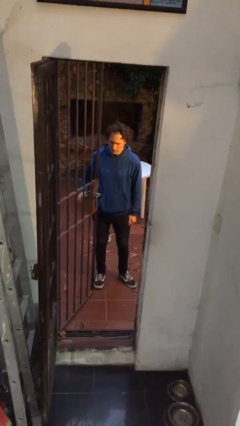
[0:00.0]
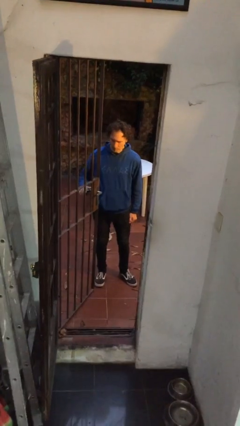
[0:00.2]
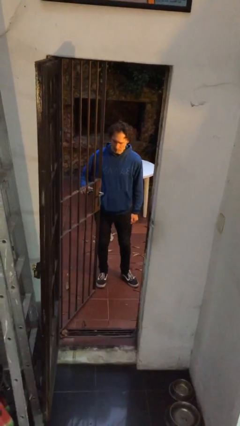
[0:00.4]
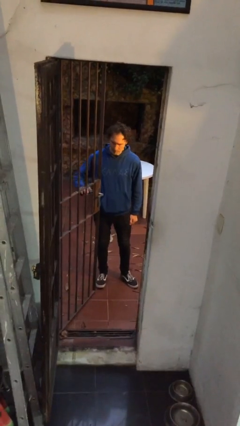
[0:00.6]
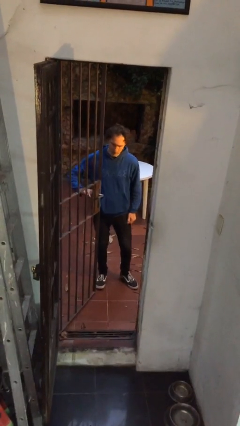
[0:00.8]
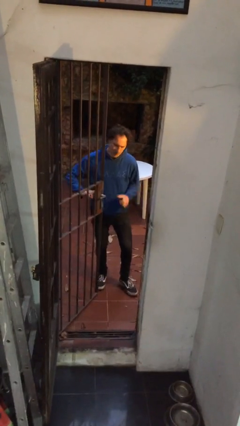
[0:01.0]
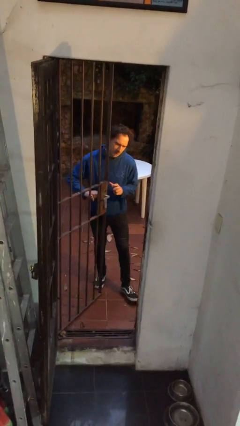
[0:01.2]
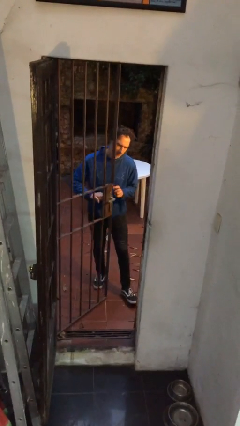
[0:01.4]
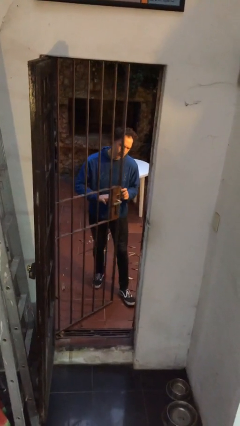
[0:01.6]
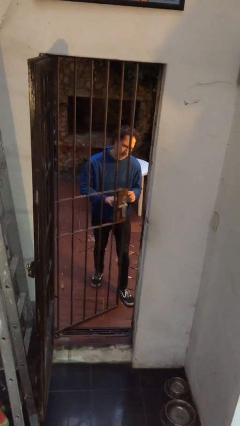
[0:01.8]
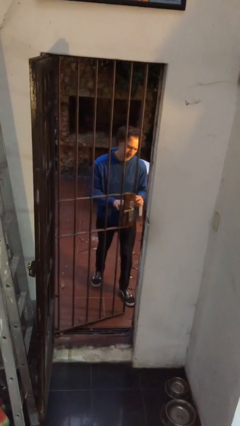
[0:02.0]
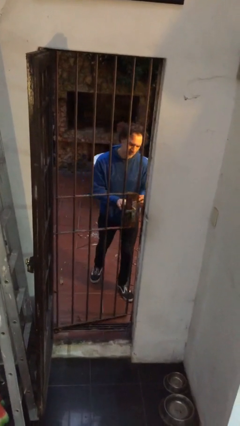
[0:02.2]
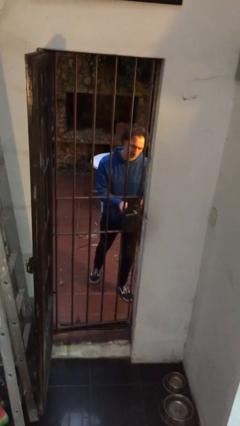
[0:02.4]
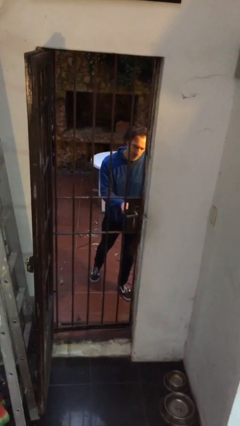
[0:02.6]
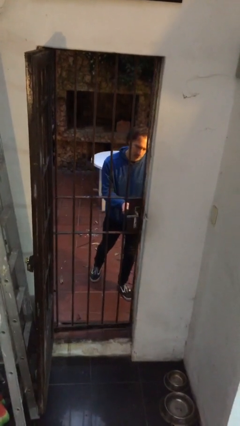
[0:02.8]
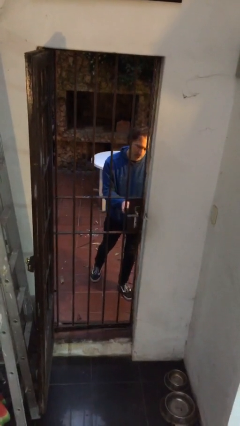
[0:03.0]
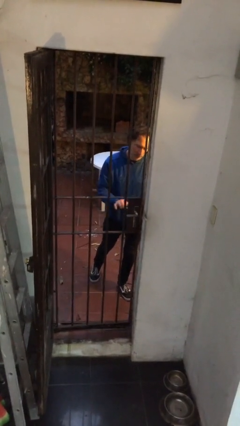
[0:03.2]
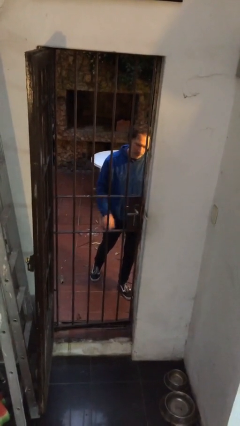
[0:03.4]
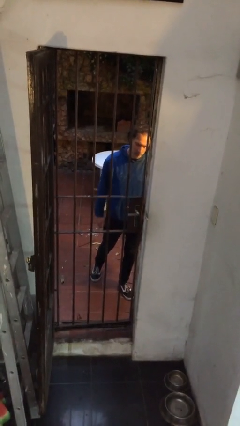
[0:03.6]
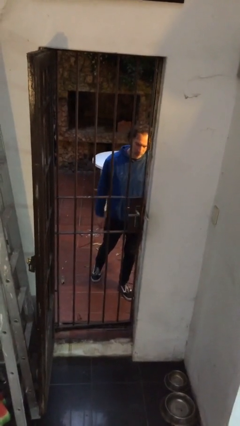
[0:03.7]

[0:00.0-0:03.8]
person closes gate

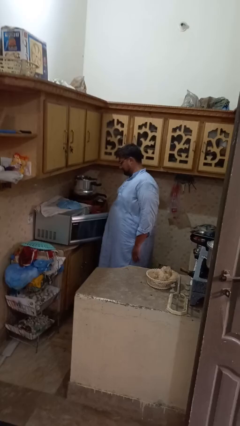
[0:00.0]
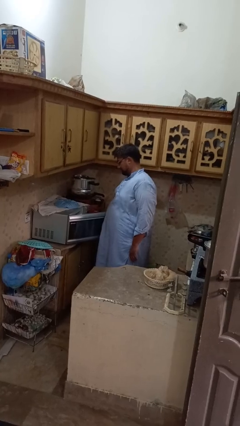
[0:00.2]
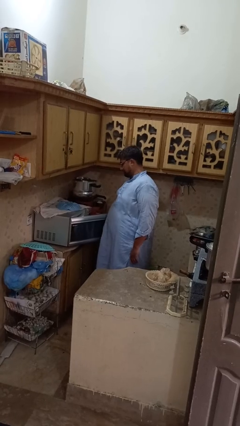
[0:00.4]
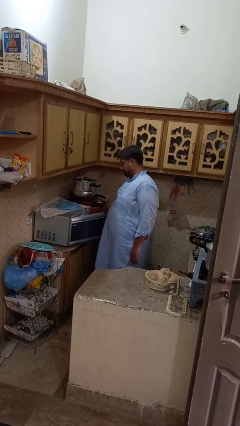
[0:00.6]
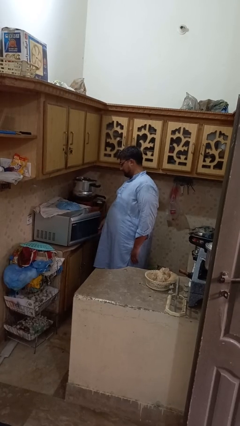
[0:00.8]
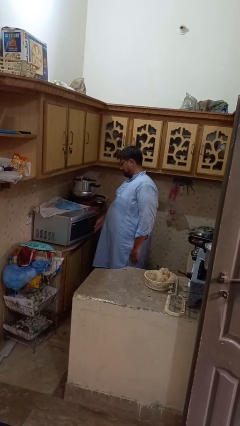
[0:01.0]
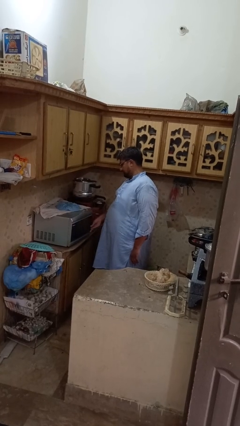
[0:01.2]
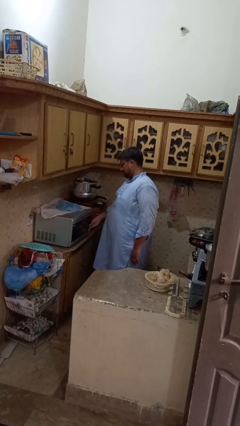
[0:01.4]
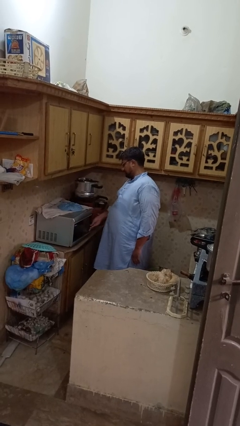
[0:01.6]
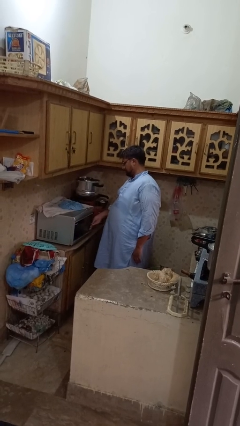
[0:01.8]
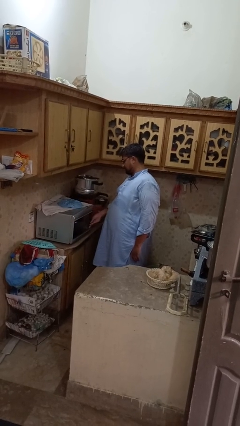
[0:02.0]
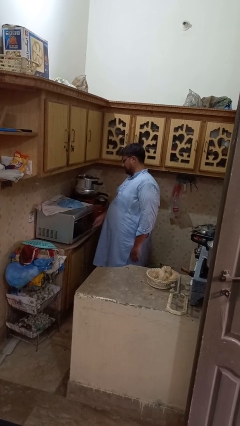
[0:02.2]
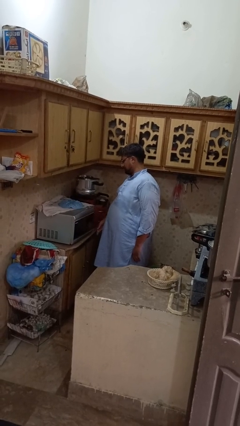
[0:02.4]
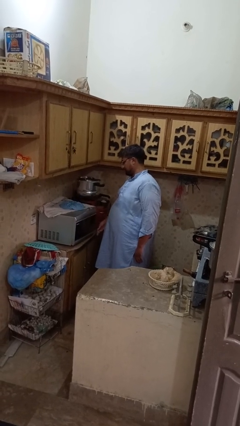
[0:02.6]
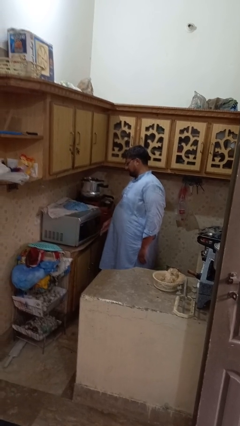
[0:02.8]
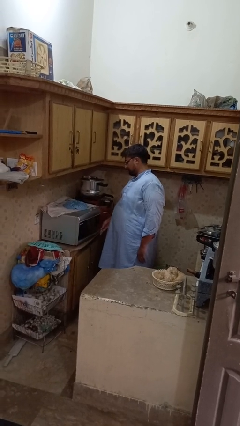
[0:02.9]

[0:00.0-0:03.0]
person closes microwave

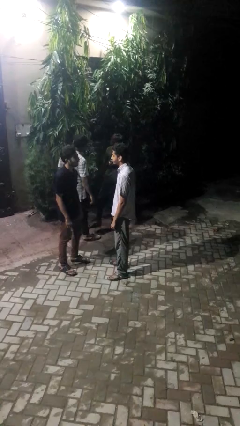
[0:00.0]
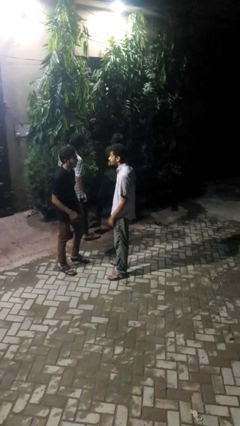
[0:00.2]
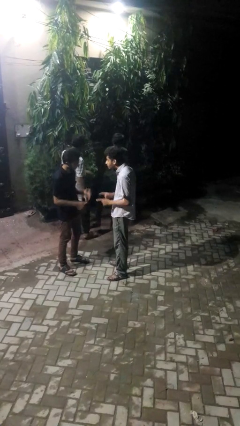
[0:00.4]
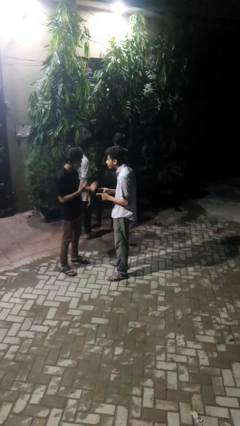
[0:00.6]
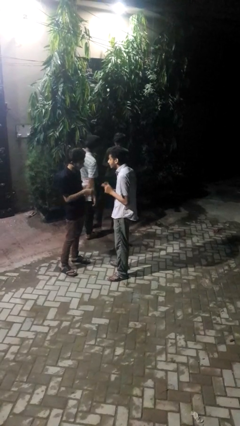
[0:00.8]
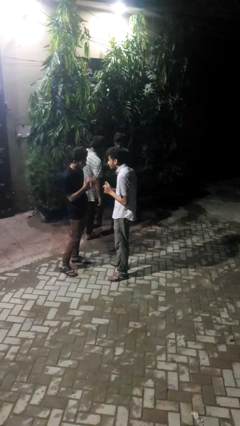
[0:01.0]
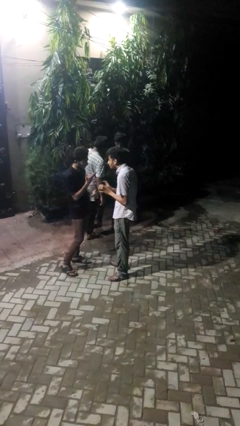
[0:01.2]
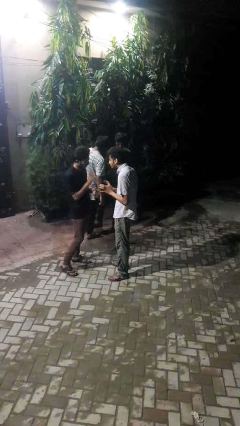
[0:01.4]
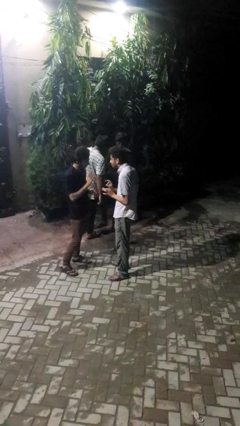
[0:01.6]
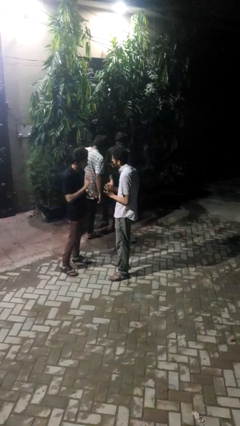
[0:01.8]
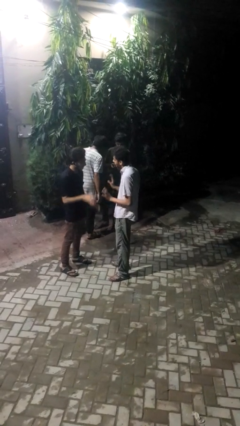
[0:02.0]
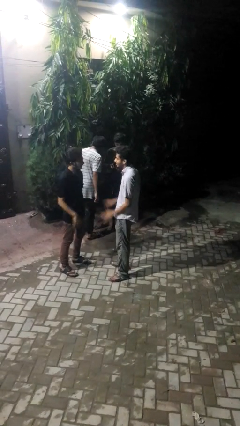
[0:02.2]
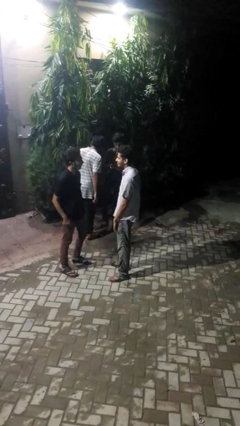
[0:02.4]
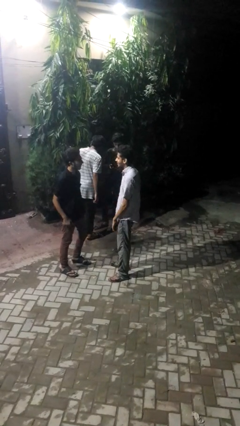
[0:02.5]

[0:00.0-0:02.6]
person talks to person

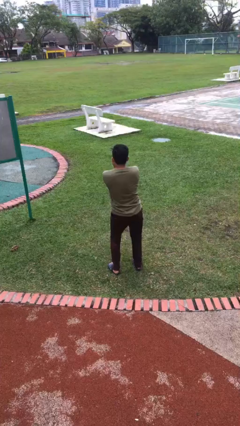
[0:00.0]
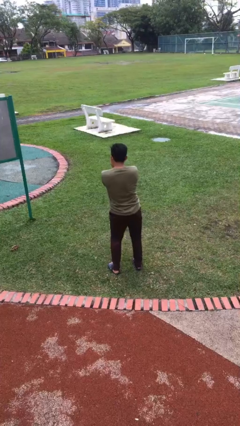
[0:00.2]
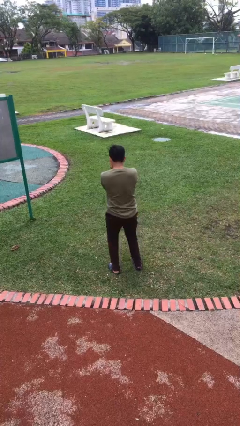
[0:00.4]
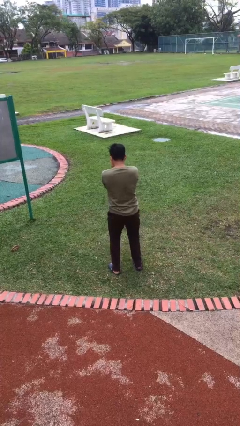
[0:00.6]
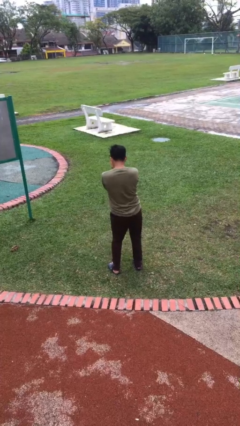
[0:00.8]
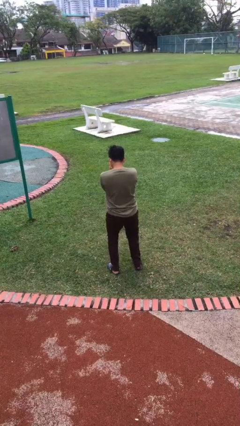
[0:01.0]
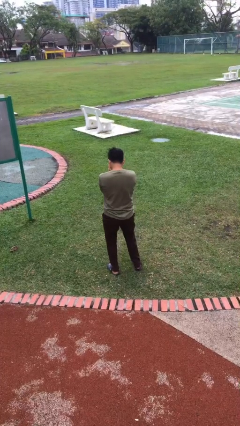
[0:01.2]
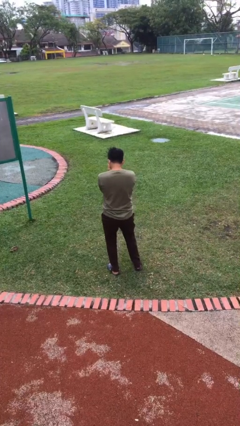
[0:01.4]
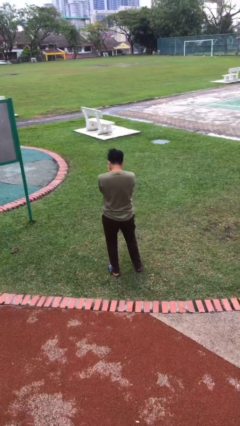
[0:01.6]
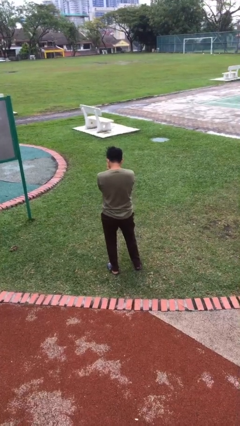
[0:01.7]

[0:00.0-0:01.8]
person wiggles hips

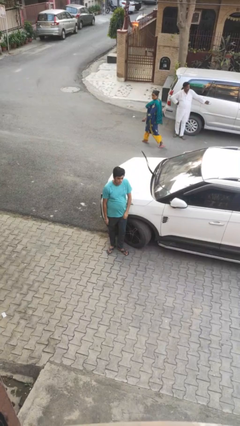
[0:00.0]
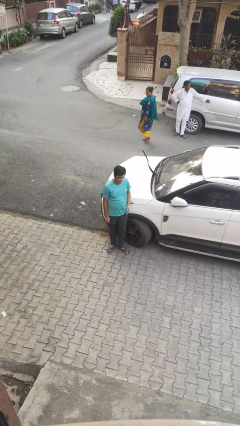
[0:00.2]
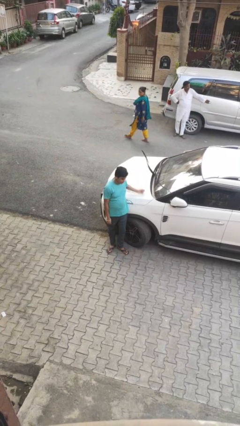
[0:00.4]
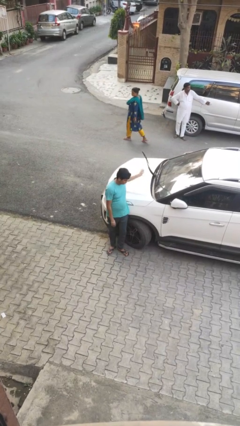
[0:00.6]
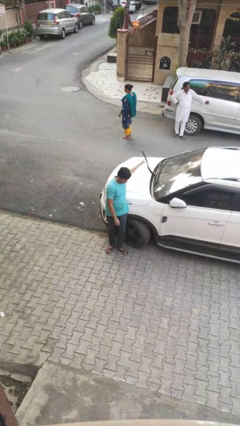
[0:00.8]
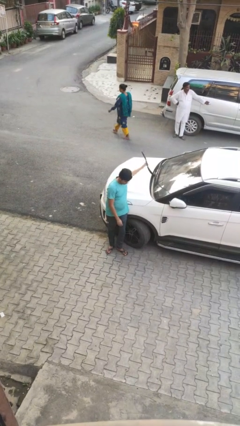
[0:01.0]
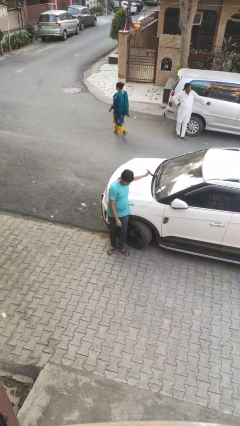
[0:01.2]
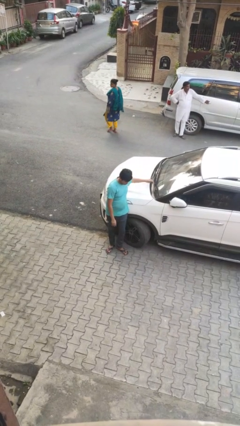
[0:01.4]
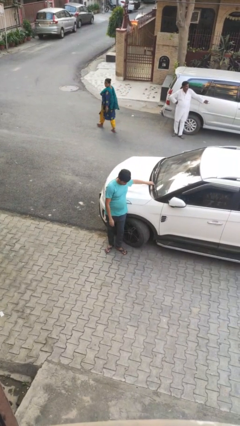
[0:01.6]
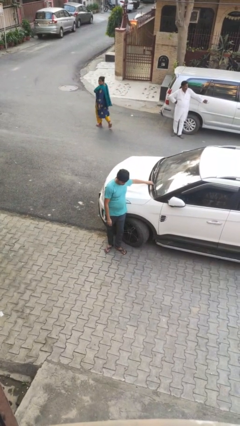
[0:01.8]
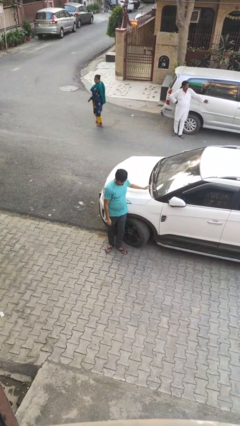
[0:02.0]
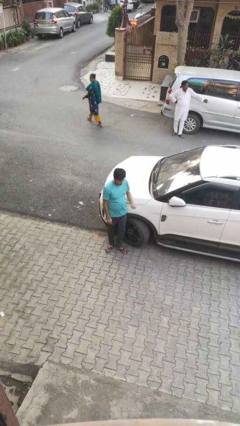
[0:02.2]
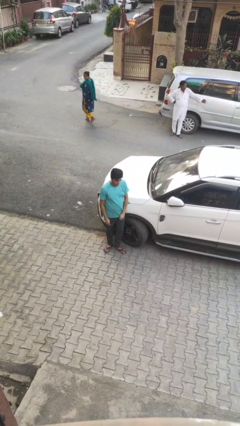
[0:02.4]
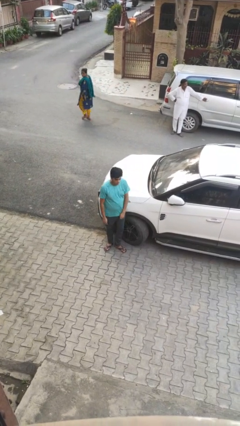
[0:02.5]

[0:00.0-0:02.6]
person flips down car wipers

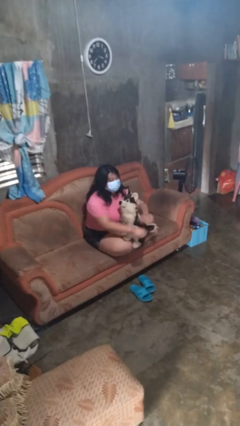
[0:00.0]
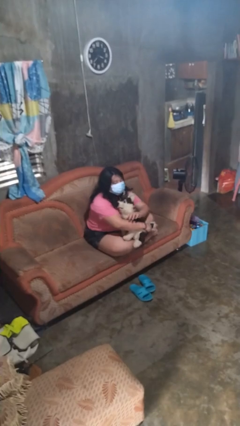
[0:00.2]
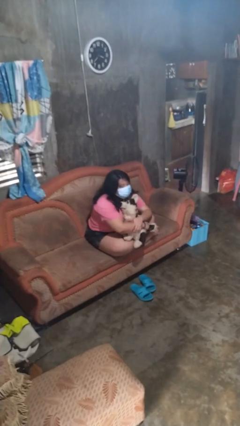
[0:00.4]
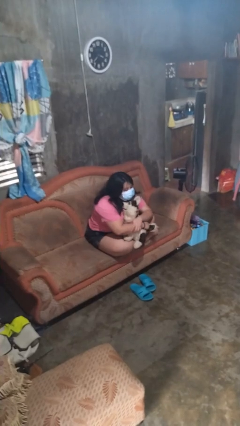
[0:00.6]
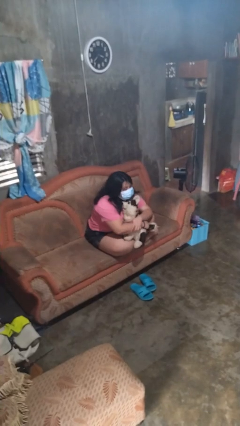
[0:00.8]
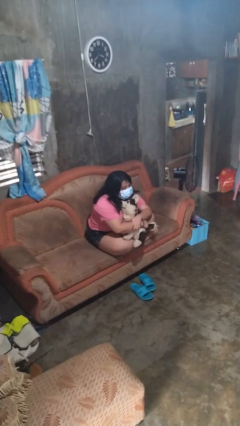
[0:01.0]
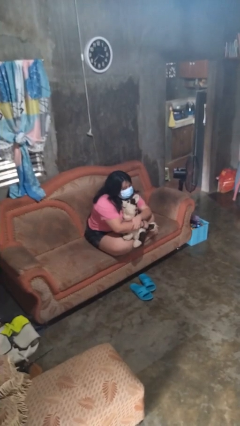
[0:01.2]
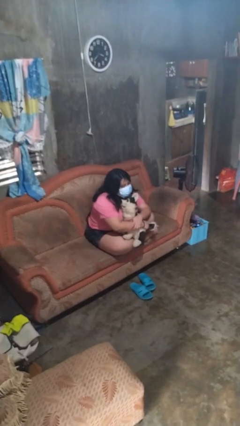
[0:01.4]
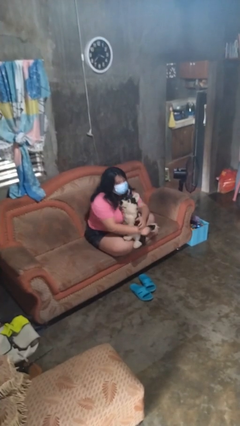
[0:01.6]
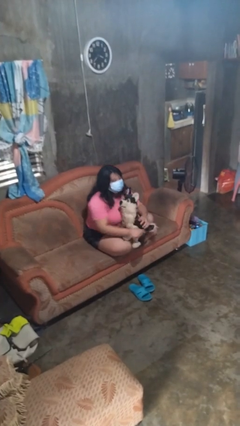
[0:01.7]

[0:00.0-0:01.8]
person hugs stuffed animal

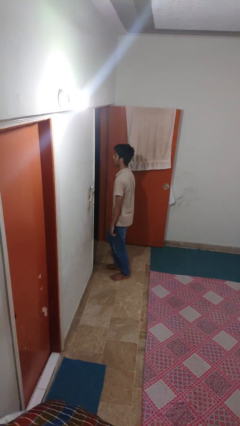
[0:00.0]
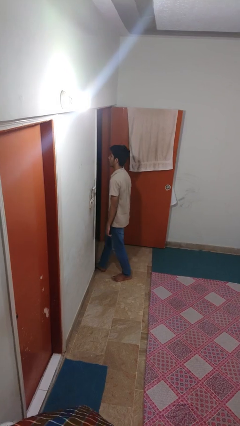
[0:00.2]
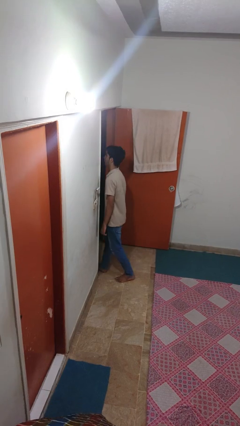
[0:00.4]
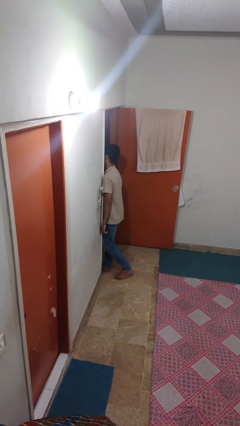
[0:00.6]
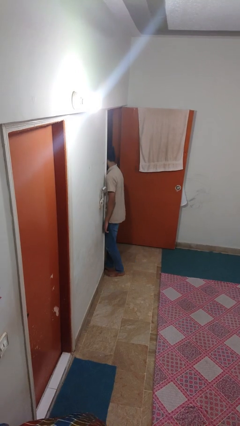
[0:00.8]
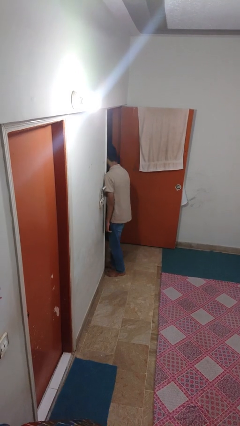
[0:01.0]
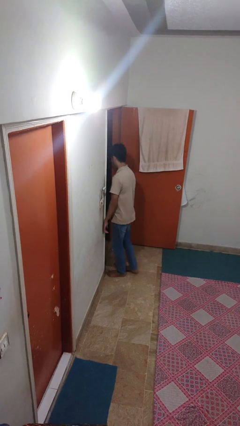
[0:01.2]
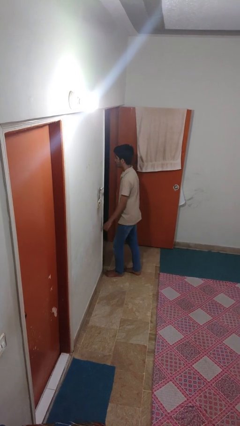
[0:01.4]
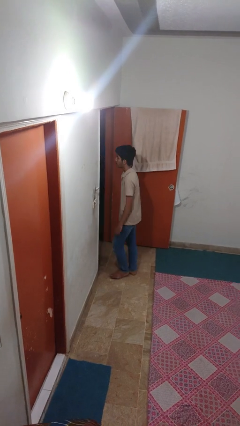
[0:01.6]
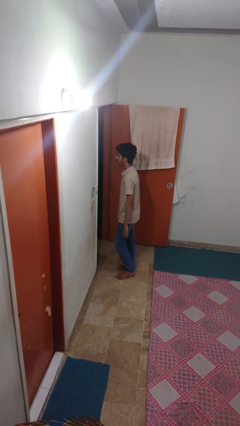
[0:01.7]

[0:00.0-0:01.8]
person bumps into wall

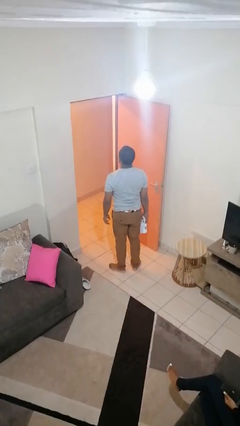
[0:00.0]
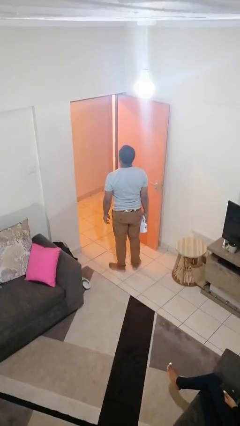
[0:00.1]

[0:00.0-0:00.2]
person holds object above head
